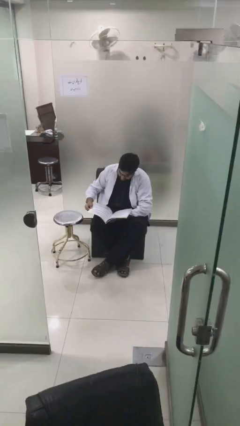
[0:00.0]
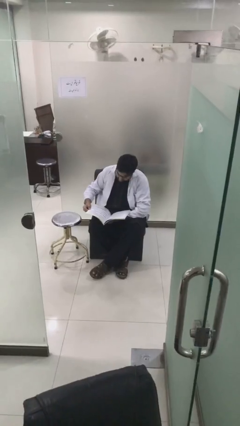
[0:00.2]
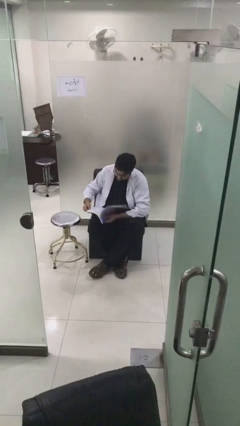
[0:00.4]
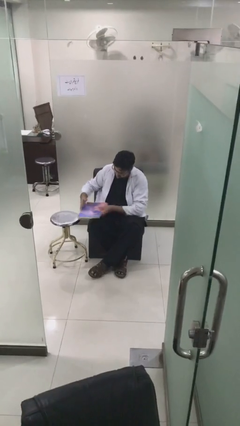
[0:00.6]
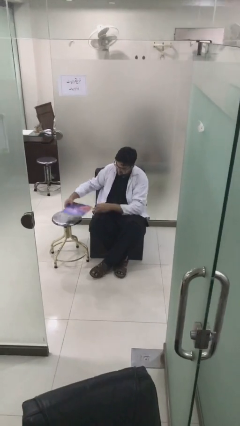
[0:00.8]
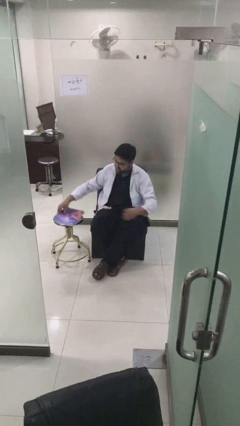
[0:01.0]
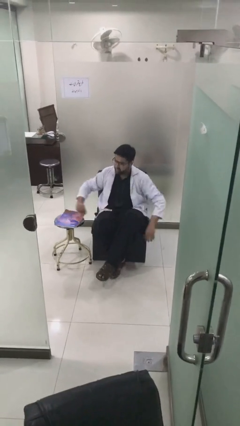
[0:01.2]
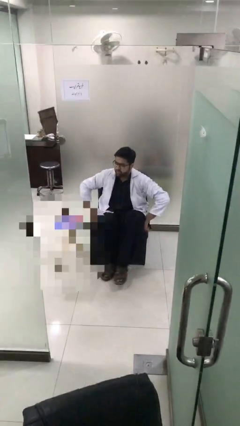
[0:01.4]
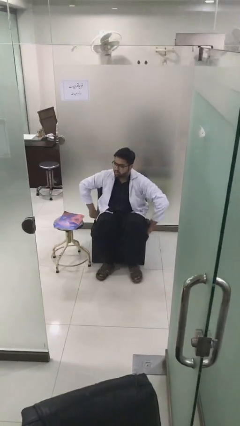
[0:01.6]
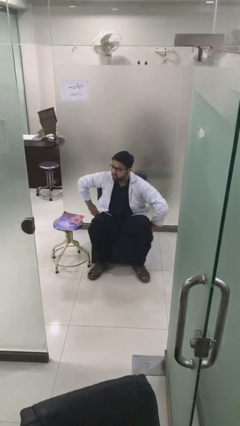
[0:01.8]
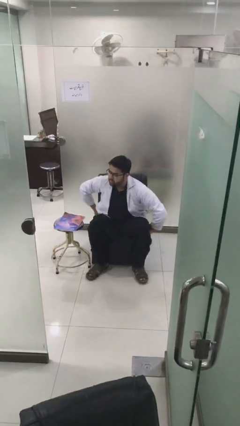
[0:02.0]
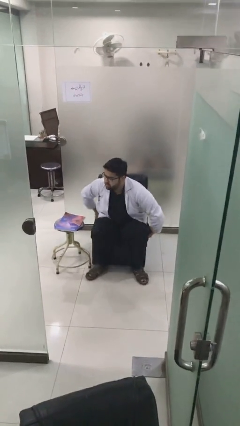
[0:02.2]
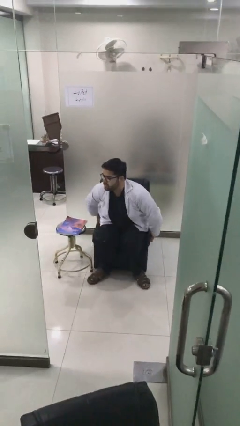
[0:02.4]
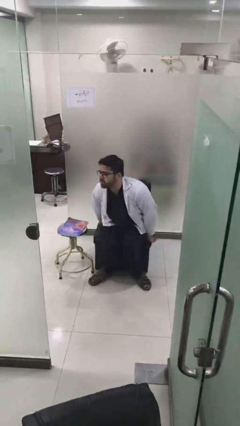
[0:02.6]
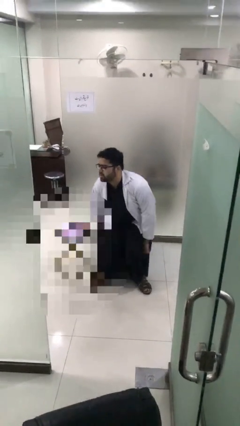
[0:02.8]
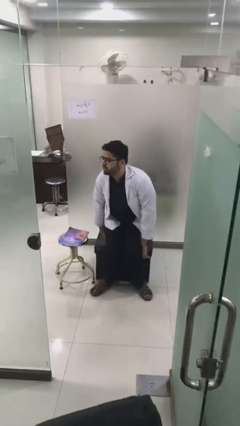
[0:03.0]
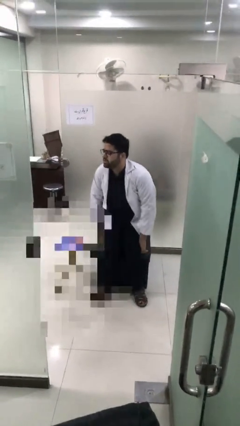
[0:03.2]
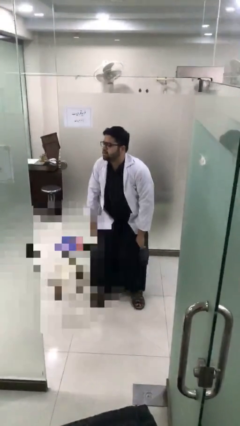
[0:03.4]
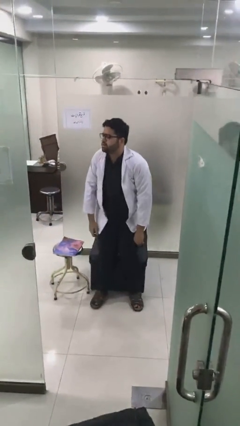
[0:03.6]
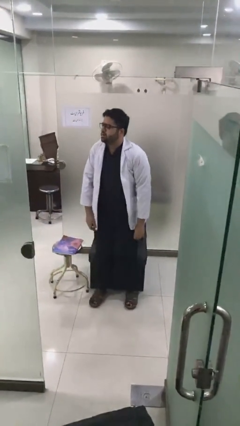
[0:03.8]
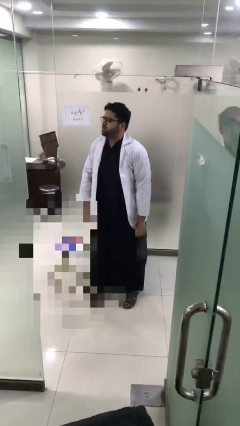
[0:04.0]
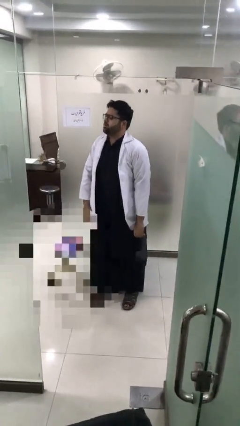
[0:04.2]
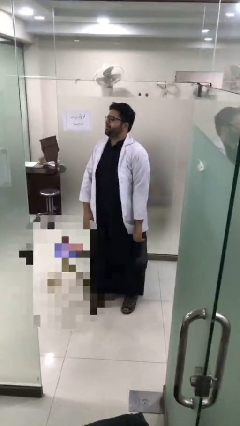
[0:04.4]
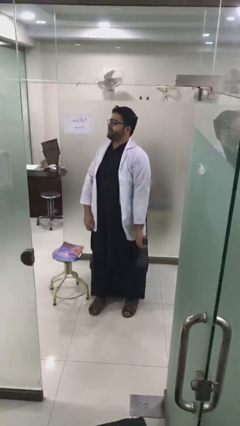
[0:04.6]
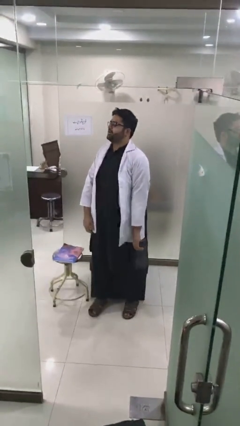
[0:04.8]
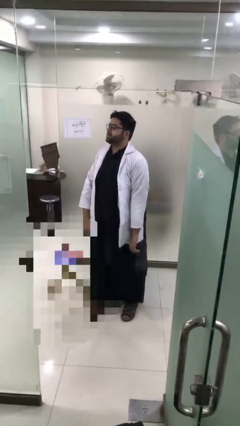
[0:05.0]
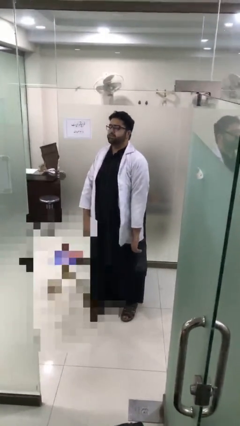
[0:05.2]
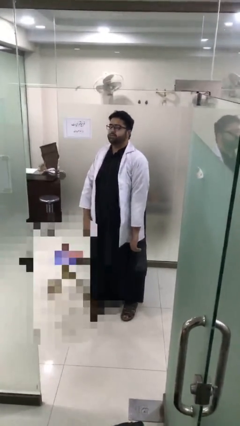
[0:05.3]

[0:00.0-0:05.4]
person stands up

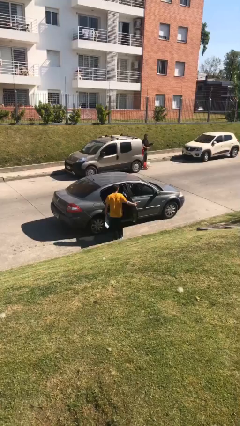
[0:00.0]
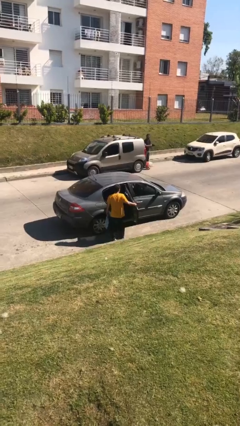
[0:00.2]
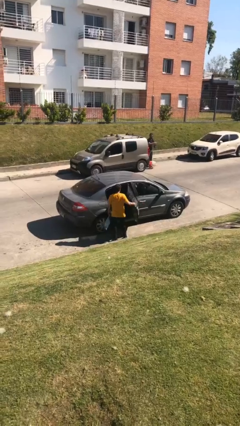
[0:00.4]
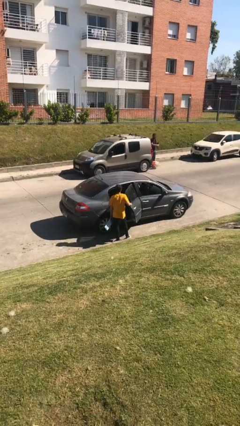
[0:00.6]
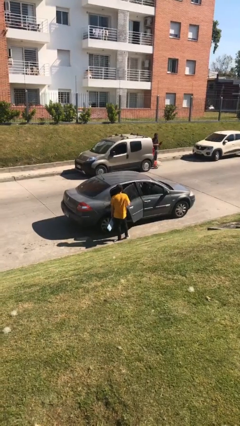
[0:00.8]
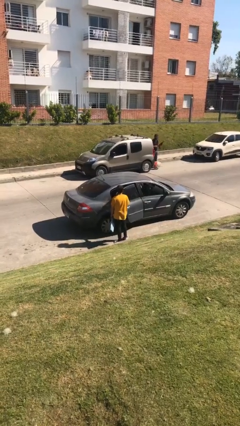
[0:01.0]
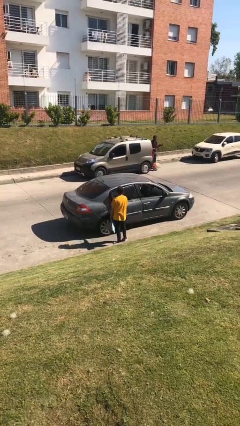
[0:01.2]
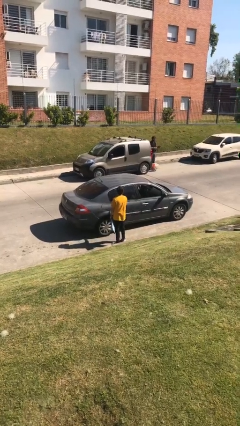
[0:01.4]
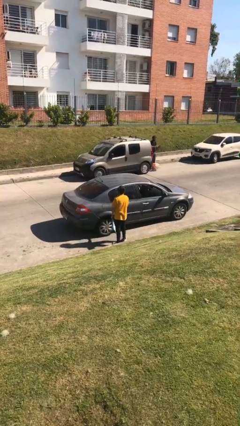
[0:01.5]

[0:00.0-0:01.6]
person closes car door

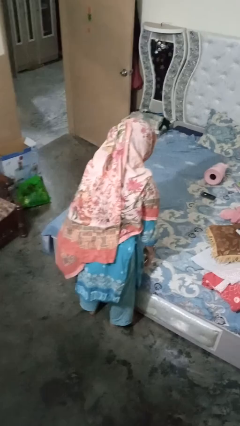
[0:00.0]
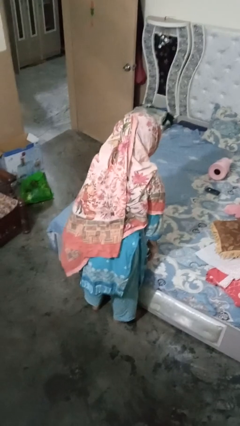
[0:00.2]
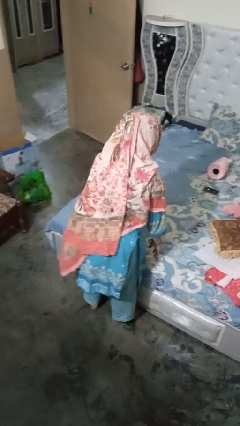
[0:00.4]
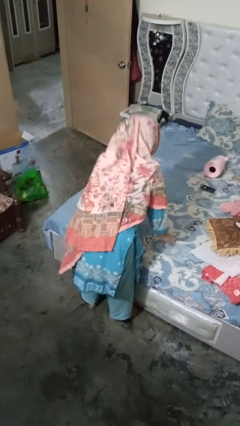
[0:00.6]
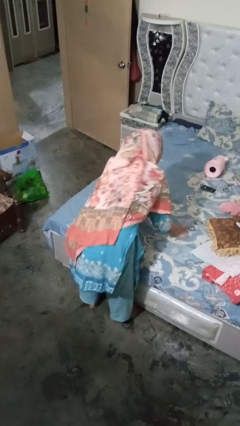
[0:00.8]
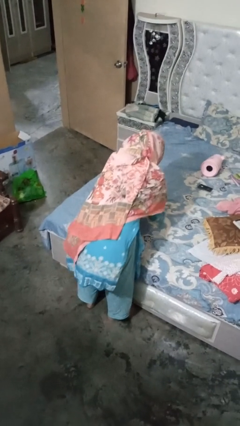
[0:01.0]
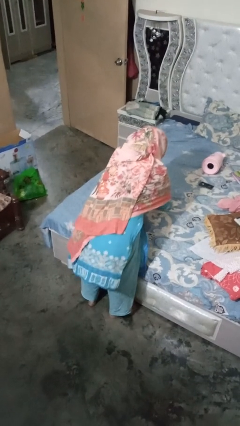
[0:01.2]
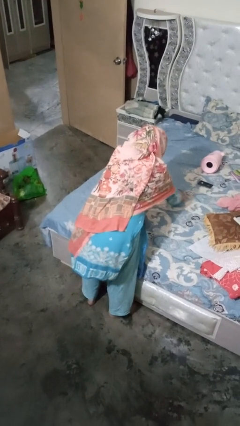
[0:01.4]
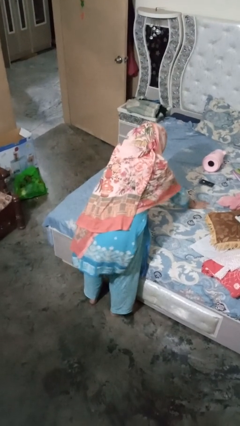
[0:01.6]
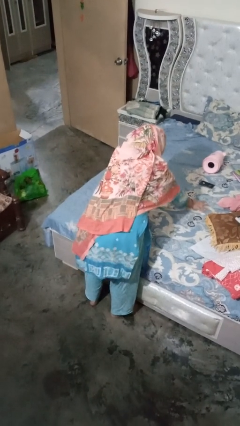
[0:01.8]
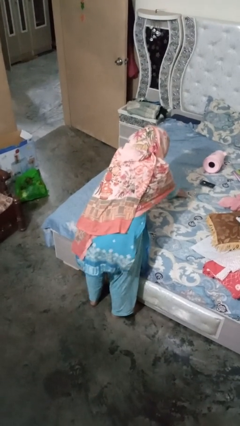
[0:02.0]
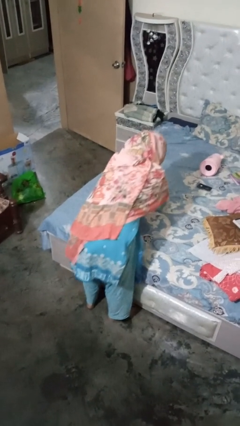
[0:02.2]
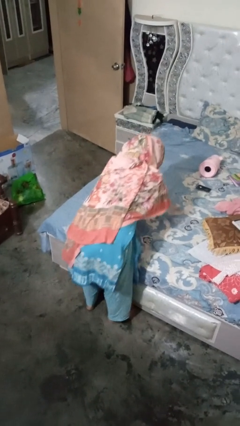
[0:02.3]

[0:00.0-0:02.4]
person searches under bed

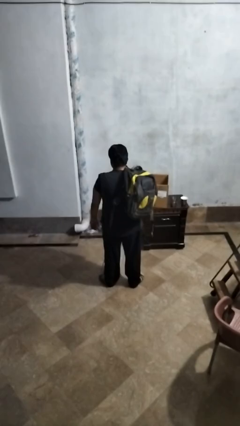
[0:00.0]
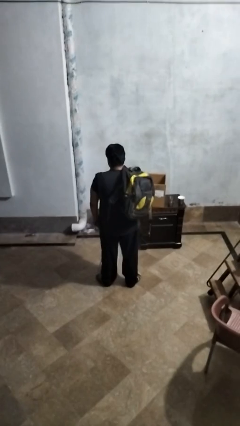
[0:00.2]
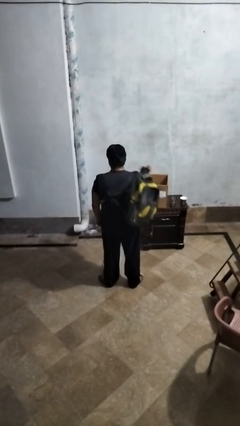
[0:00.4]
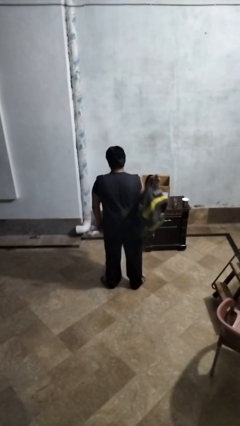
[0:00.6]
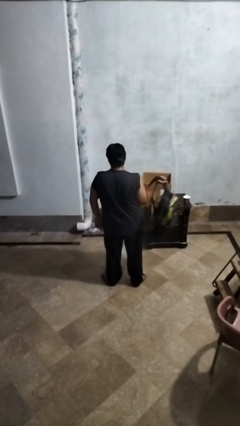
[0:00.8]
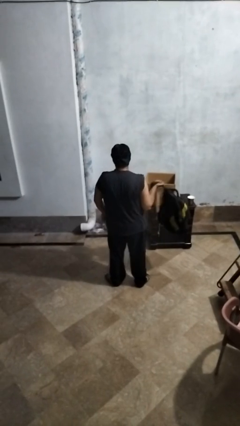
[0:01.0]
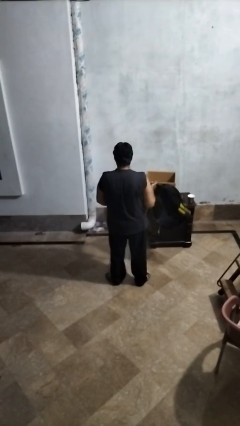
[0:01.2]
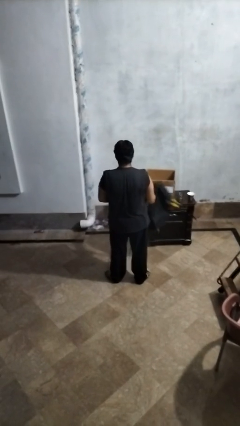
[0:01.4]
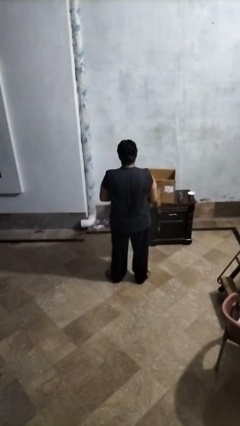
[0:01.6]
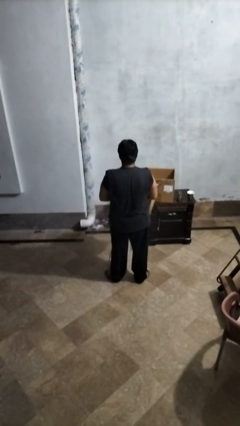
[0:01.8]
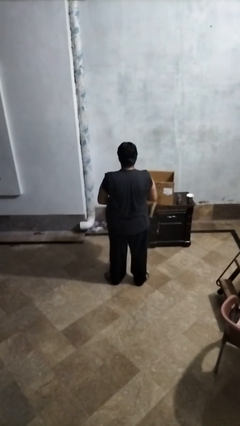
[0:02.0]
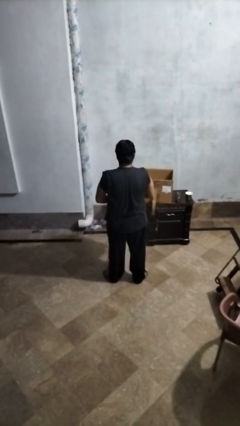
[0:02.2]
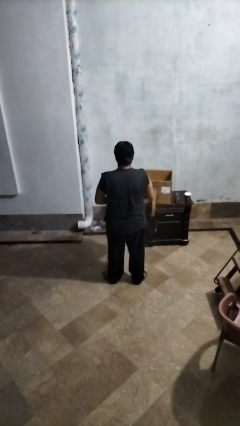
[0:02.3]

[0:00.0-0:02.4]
person takes off backpack

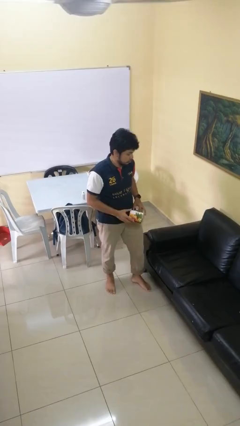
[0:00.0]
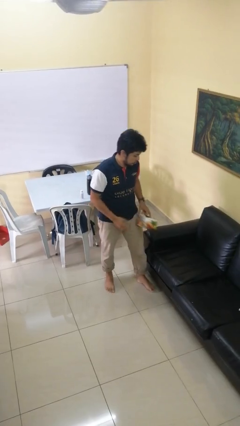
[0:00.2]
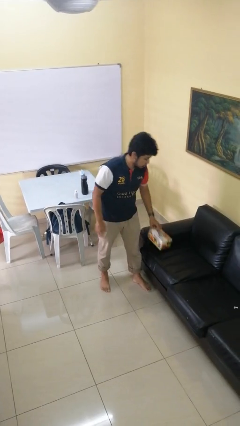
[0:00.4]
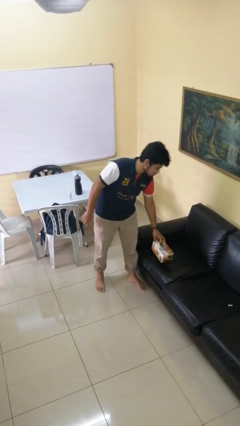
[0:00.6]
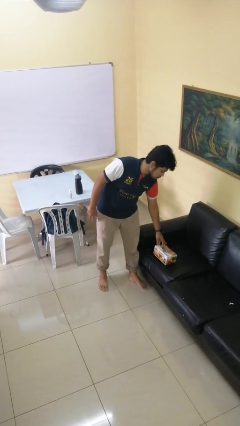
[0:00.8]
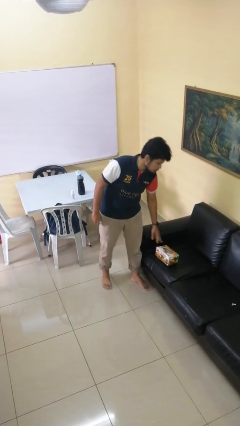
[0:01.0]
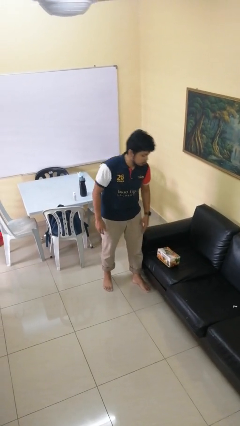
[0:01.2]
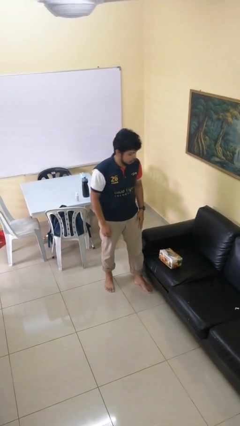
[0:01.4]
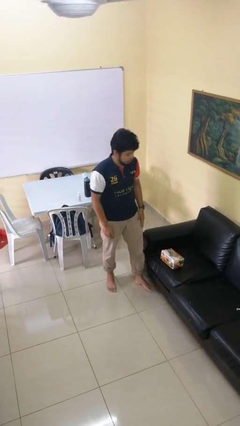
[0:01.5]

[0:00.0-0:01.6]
person puts down object on couch

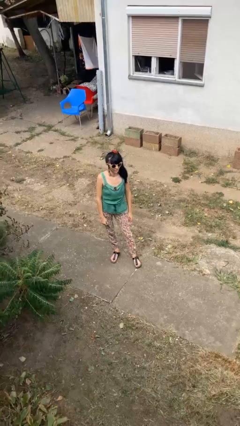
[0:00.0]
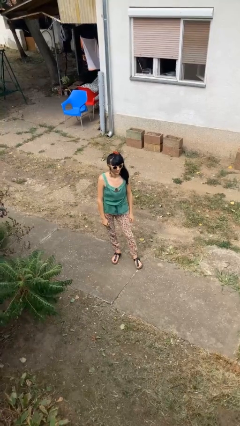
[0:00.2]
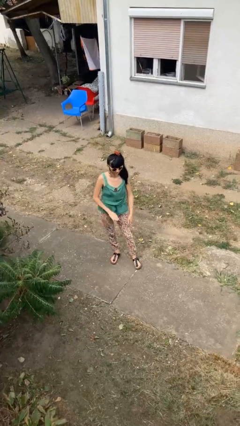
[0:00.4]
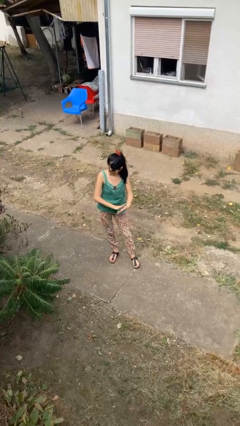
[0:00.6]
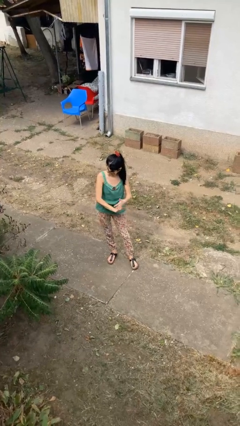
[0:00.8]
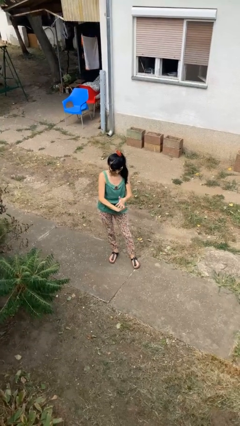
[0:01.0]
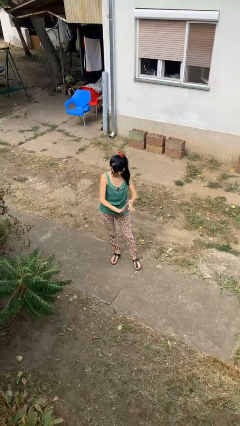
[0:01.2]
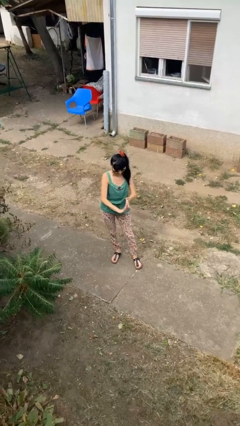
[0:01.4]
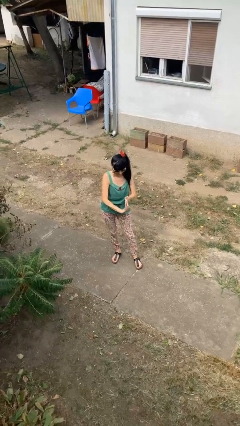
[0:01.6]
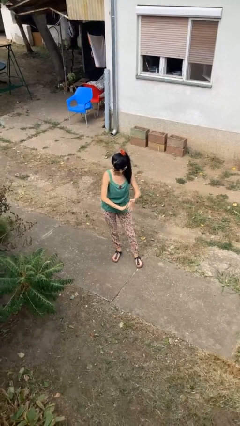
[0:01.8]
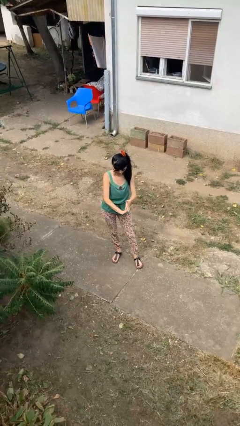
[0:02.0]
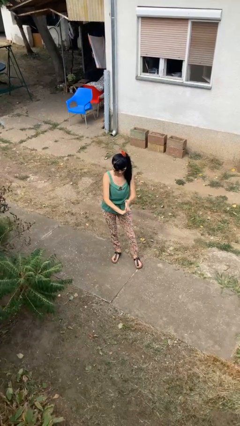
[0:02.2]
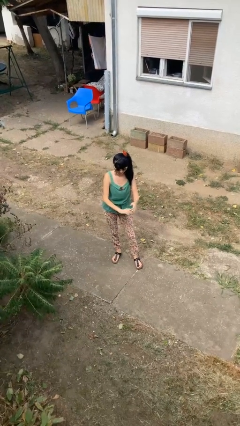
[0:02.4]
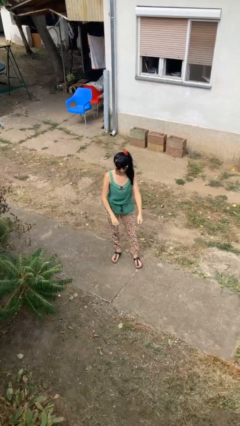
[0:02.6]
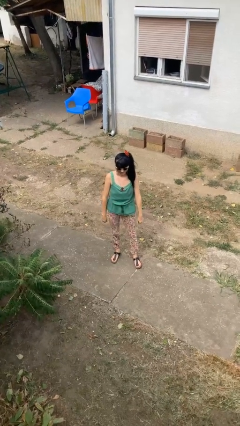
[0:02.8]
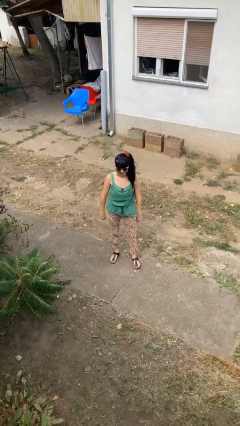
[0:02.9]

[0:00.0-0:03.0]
person cracks knuckles

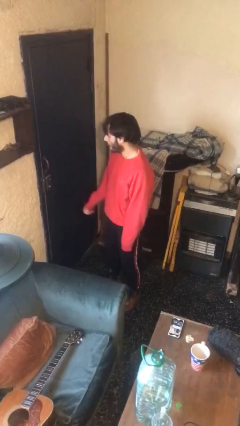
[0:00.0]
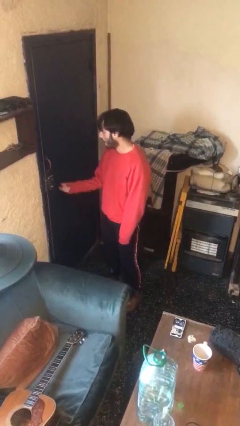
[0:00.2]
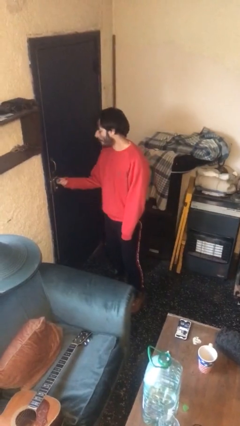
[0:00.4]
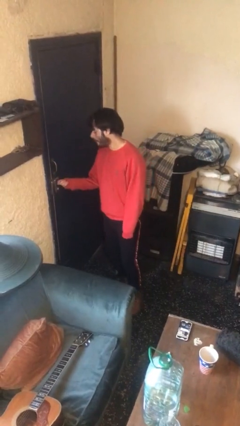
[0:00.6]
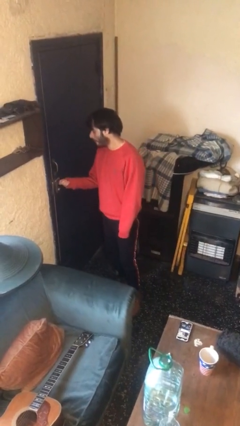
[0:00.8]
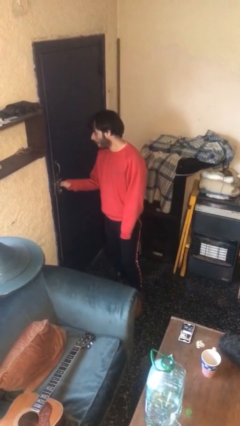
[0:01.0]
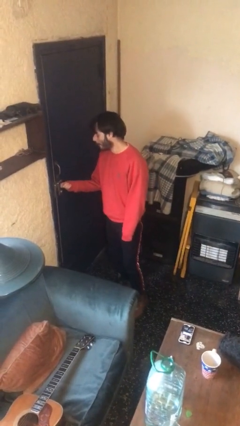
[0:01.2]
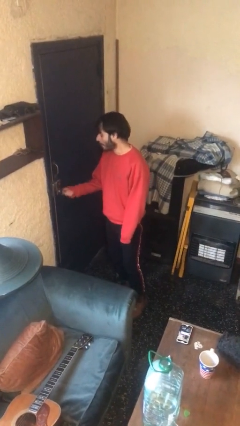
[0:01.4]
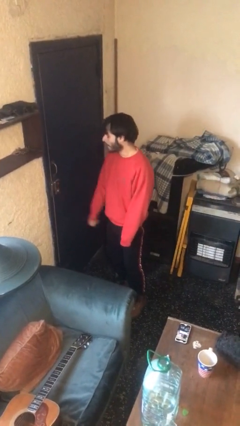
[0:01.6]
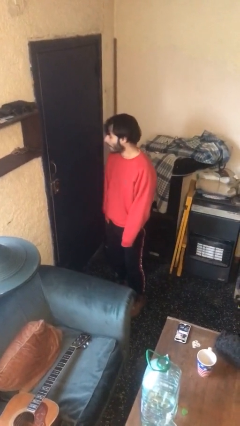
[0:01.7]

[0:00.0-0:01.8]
person locks door with keys
